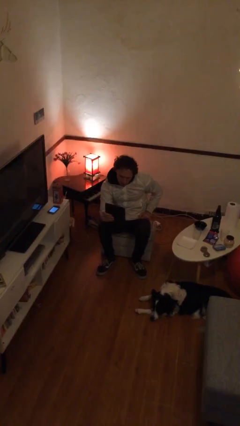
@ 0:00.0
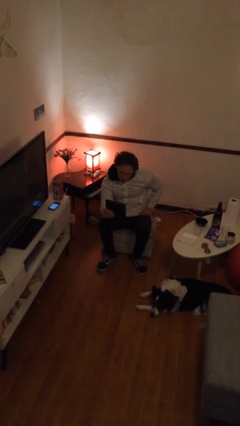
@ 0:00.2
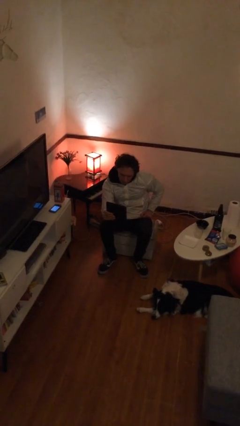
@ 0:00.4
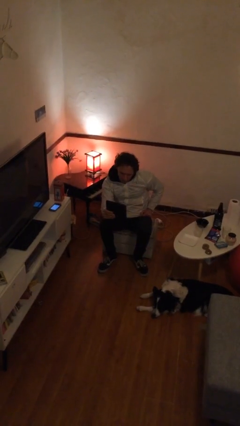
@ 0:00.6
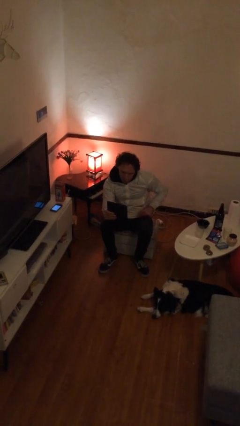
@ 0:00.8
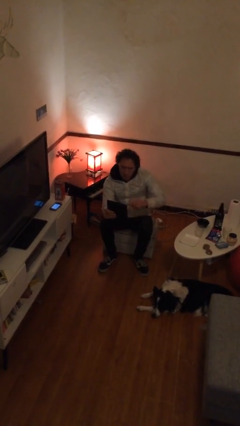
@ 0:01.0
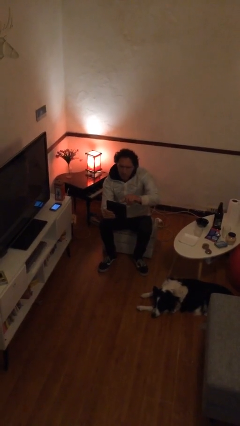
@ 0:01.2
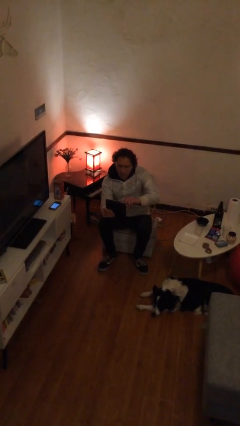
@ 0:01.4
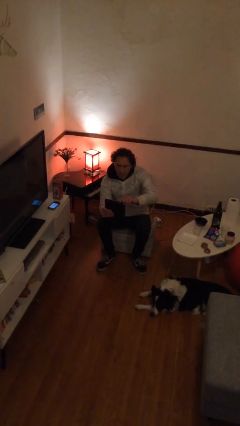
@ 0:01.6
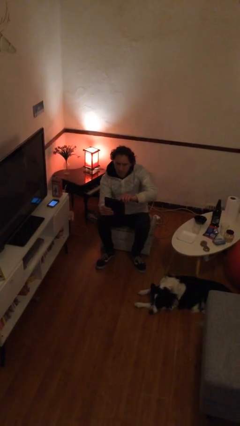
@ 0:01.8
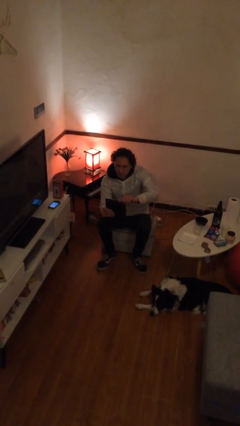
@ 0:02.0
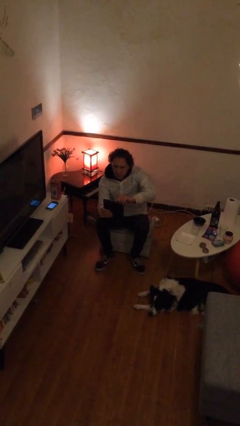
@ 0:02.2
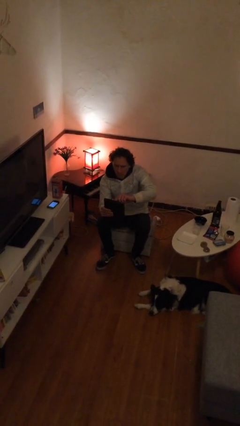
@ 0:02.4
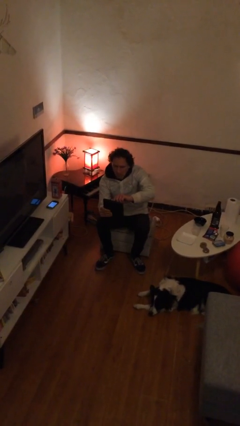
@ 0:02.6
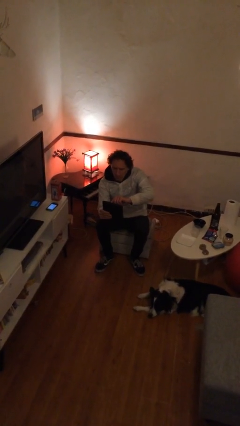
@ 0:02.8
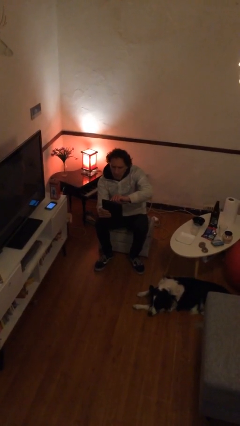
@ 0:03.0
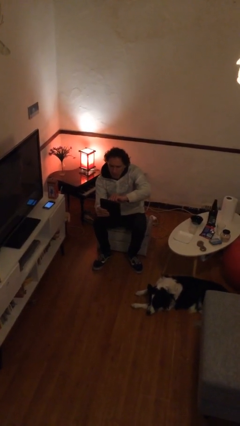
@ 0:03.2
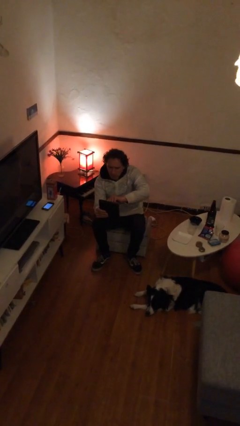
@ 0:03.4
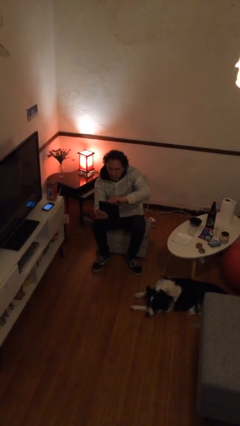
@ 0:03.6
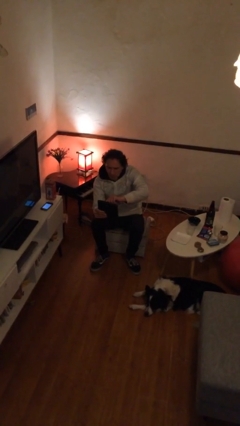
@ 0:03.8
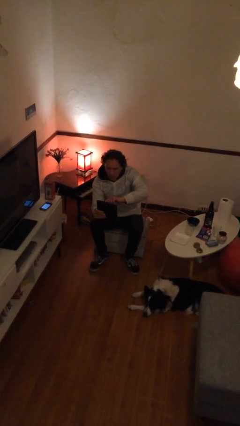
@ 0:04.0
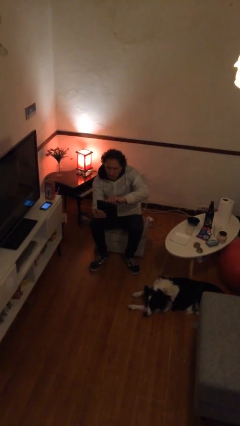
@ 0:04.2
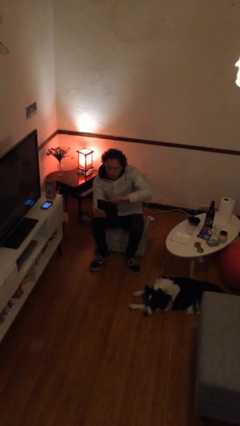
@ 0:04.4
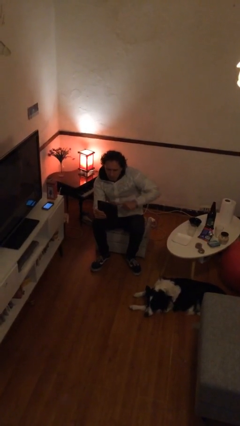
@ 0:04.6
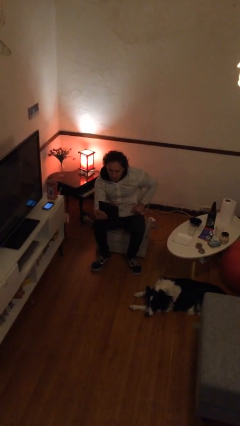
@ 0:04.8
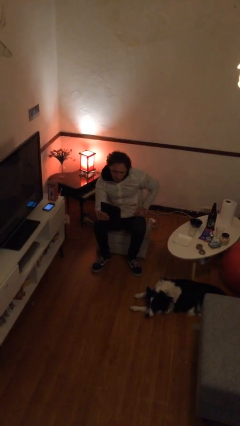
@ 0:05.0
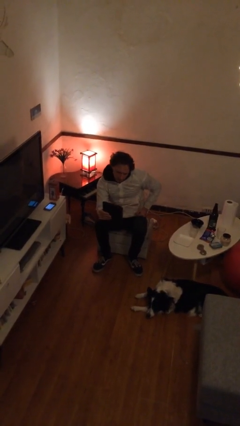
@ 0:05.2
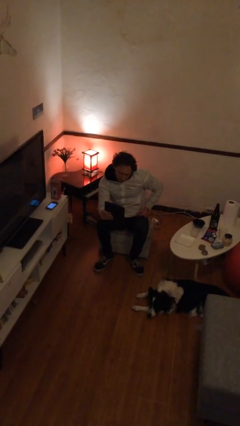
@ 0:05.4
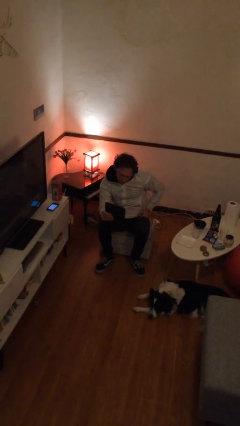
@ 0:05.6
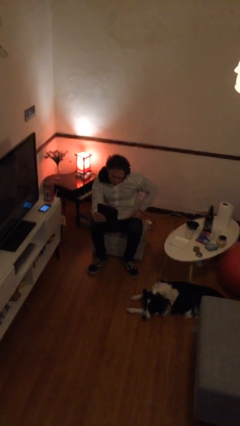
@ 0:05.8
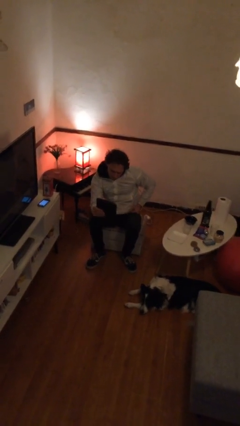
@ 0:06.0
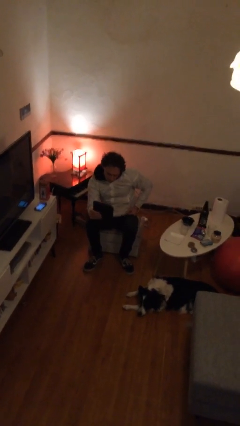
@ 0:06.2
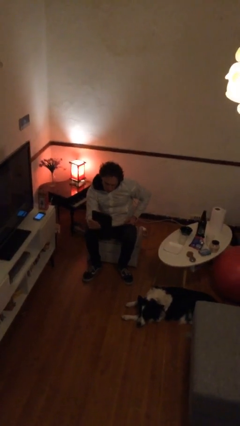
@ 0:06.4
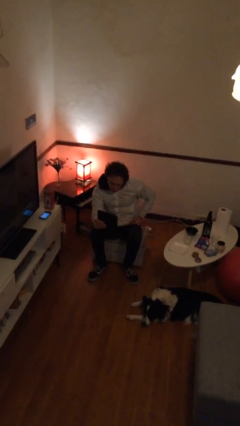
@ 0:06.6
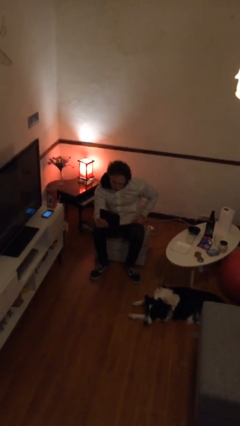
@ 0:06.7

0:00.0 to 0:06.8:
person interacts with tablet

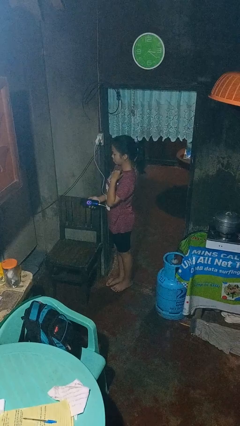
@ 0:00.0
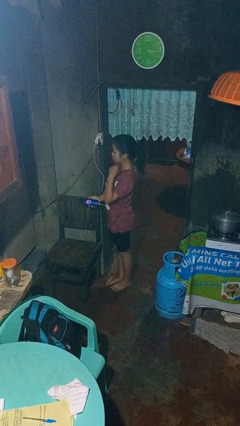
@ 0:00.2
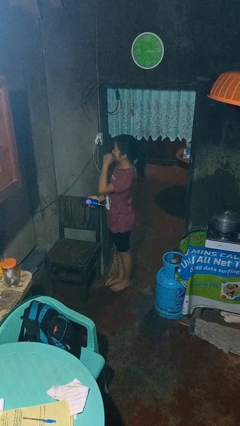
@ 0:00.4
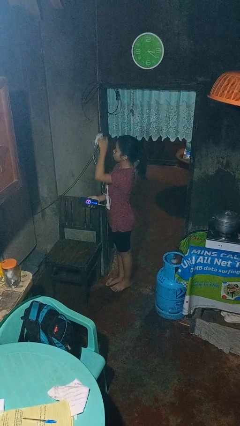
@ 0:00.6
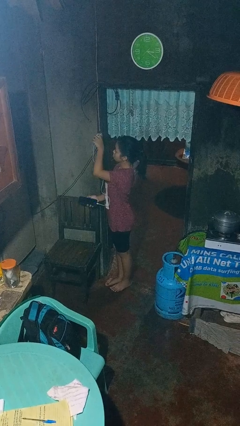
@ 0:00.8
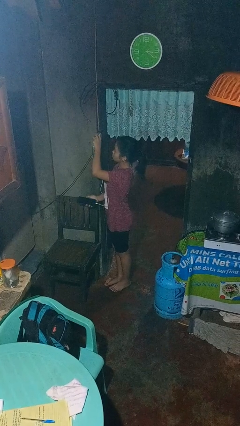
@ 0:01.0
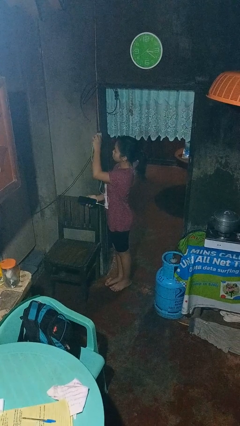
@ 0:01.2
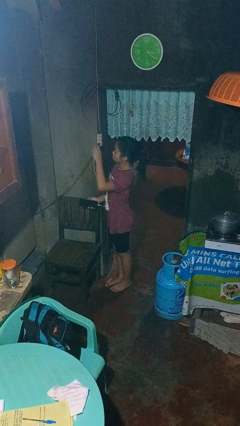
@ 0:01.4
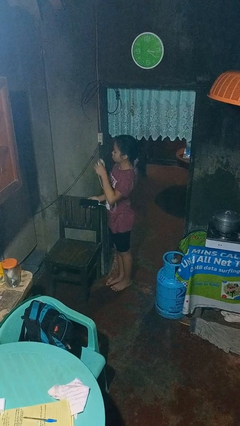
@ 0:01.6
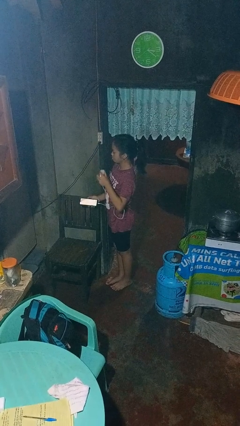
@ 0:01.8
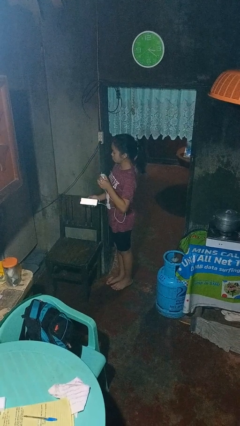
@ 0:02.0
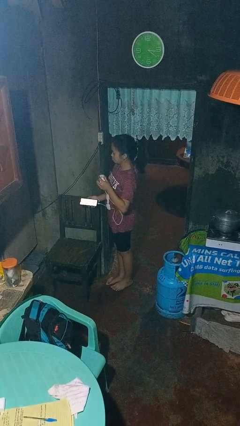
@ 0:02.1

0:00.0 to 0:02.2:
person unplugs from electrical socket

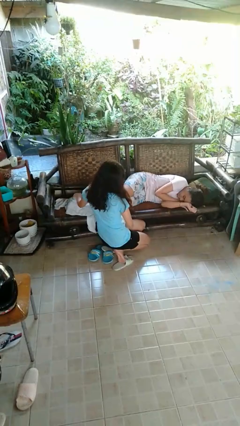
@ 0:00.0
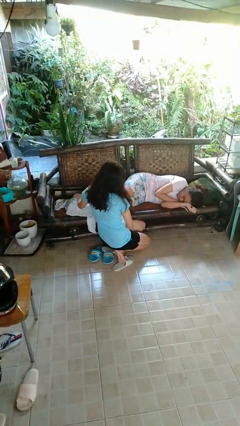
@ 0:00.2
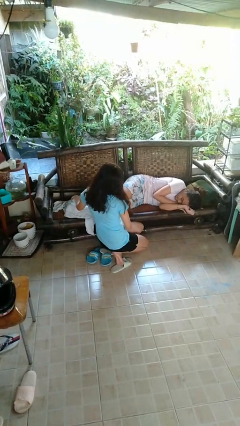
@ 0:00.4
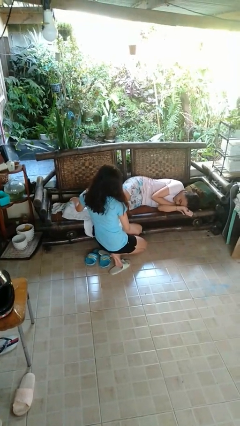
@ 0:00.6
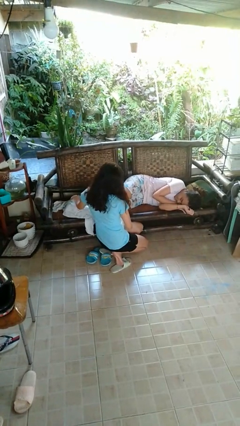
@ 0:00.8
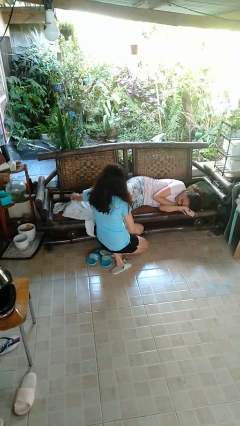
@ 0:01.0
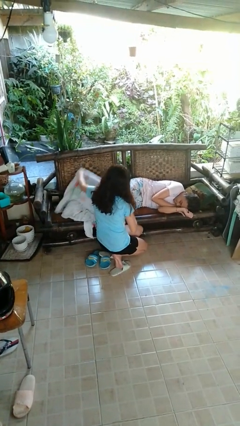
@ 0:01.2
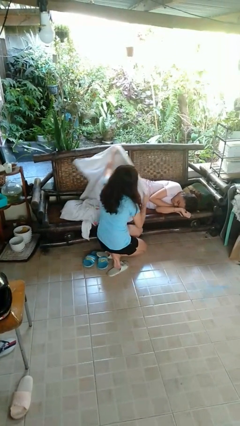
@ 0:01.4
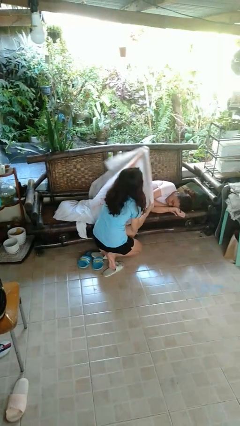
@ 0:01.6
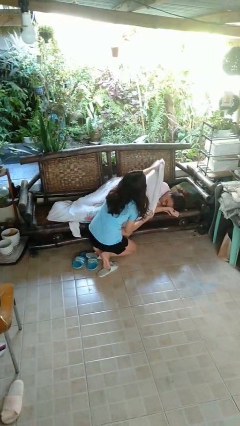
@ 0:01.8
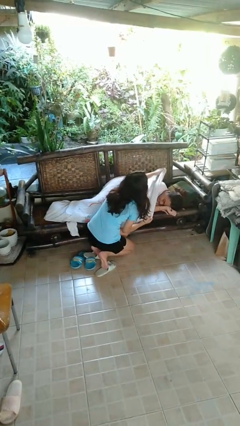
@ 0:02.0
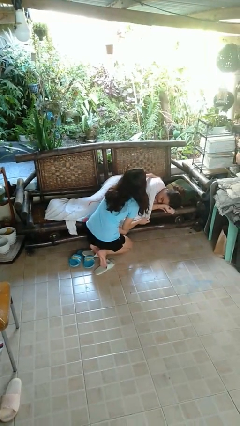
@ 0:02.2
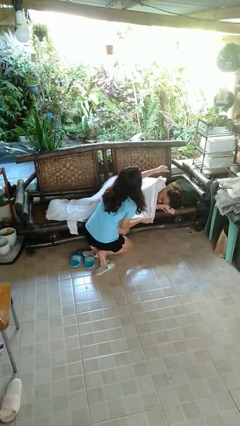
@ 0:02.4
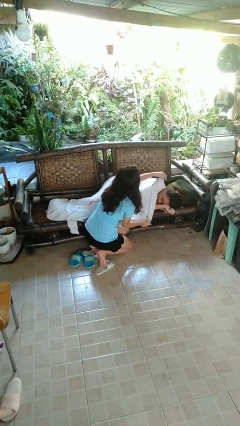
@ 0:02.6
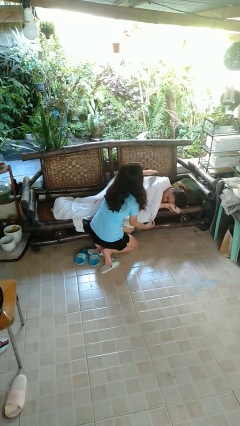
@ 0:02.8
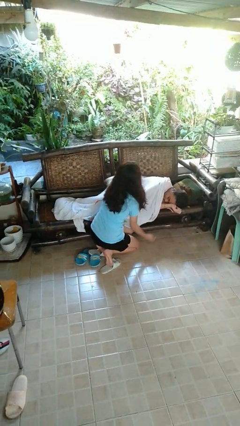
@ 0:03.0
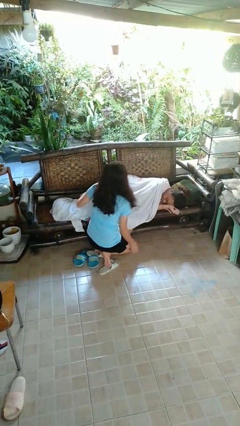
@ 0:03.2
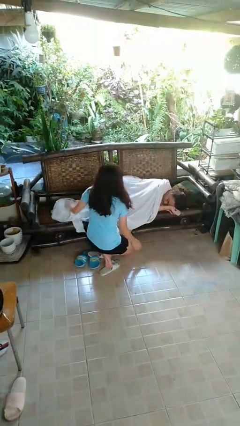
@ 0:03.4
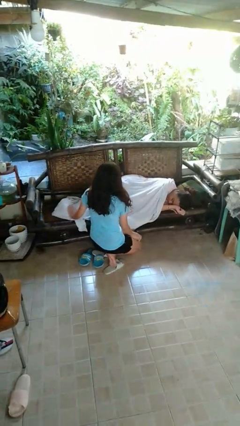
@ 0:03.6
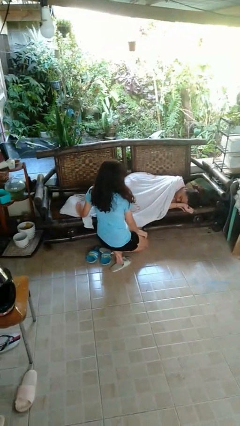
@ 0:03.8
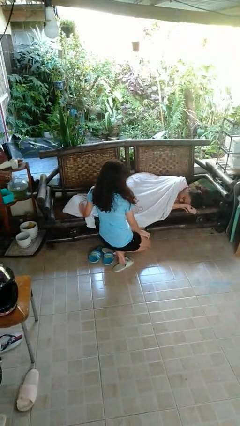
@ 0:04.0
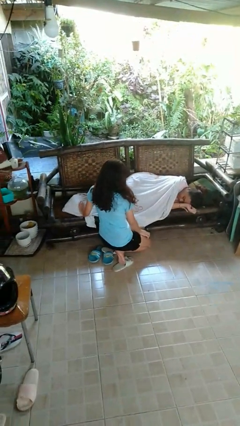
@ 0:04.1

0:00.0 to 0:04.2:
person covers friend with blanket

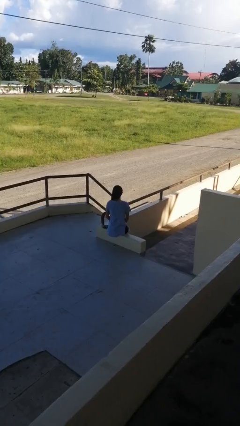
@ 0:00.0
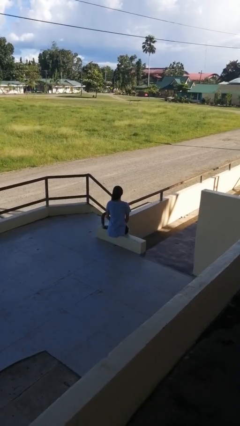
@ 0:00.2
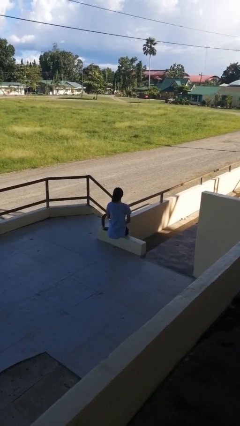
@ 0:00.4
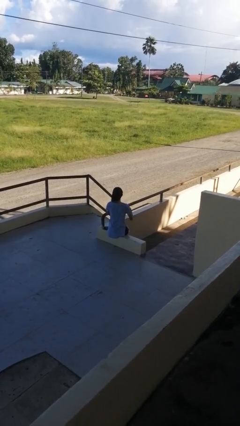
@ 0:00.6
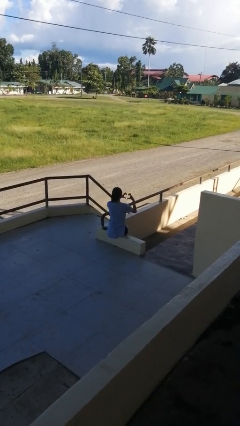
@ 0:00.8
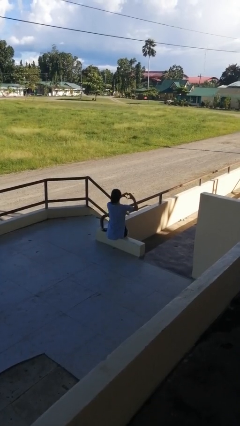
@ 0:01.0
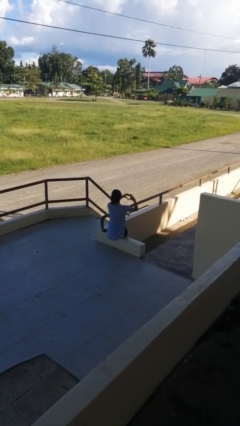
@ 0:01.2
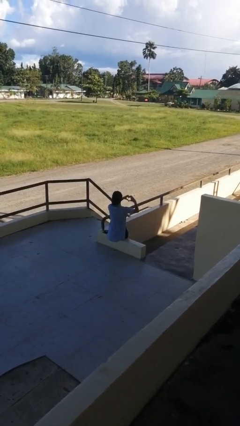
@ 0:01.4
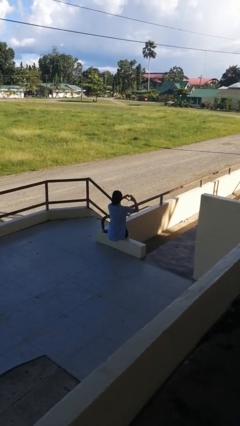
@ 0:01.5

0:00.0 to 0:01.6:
person gestures heart

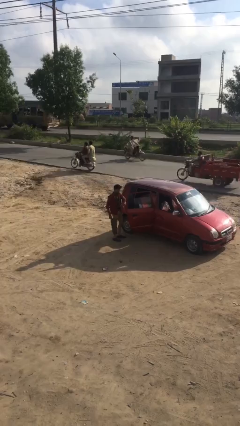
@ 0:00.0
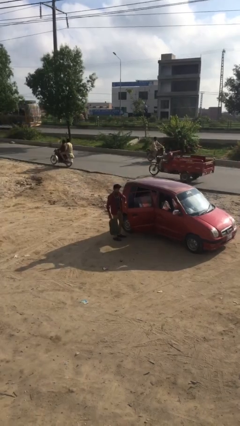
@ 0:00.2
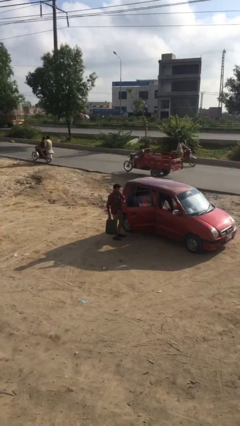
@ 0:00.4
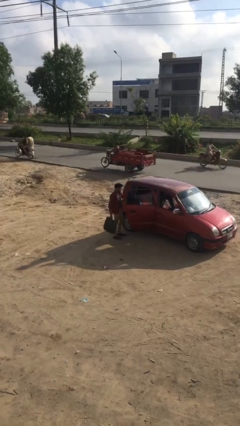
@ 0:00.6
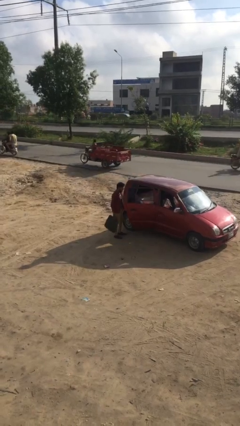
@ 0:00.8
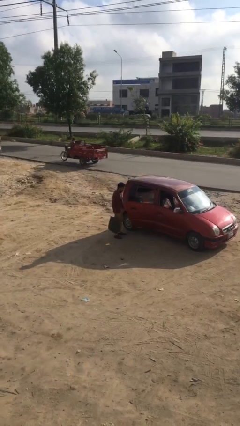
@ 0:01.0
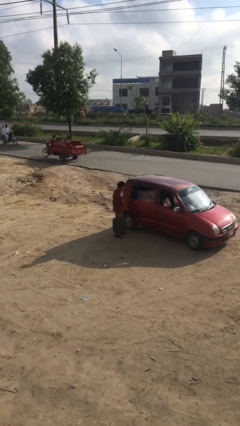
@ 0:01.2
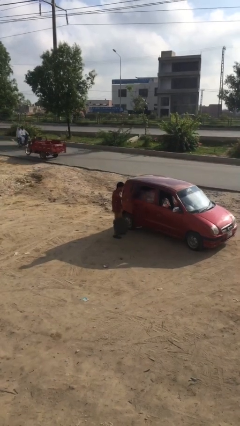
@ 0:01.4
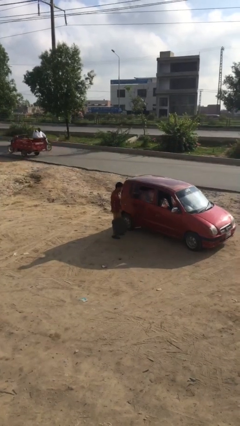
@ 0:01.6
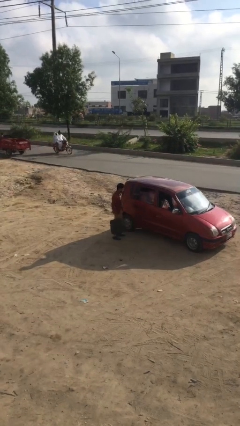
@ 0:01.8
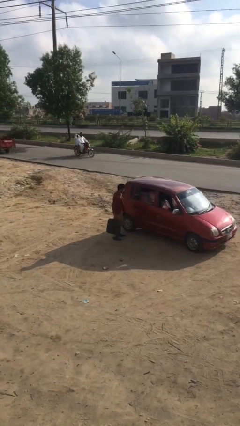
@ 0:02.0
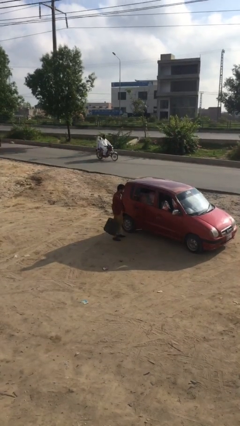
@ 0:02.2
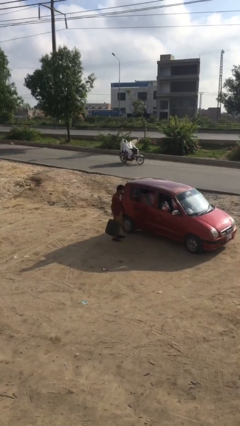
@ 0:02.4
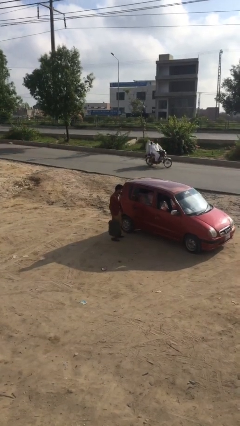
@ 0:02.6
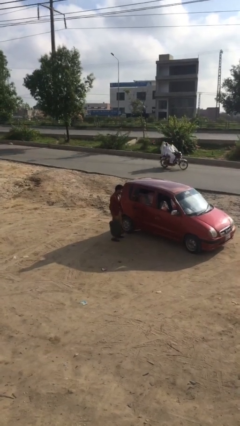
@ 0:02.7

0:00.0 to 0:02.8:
person closes car door
